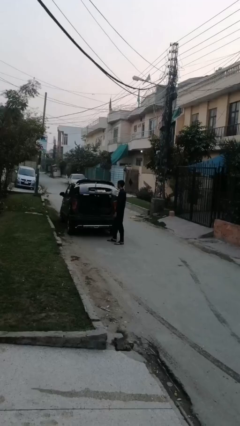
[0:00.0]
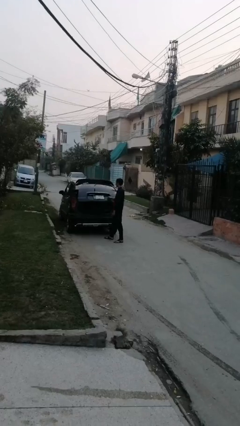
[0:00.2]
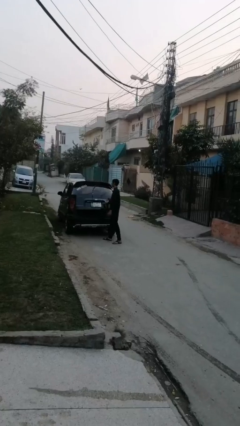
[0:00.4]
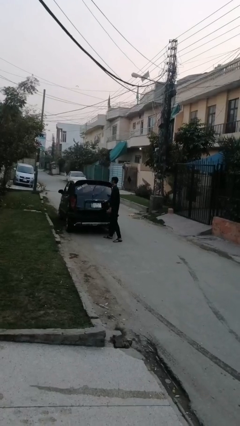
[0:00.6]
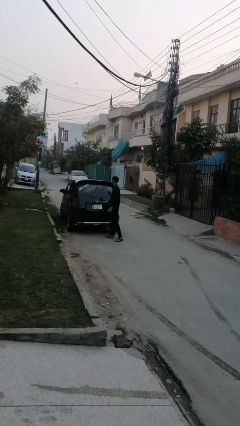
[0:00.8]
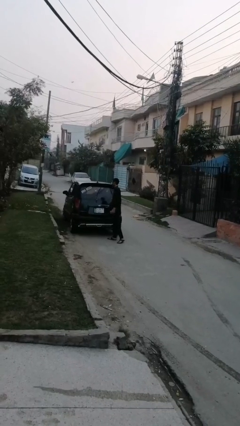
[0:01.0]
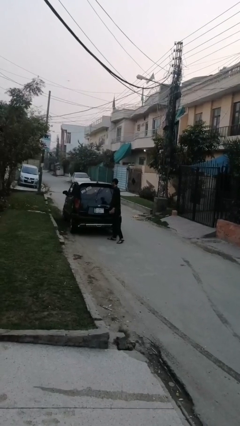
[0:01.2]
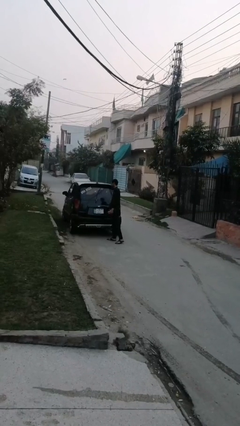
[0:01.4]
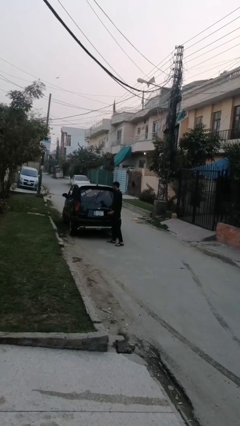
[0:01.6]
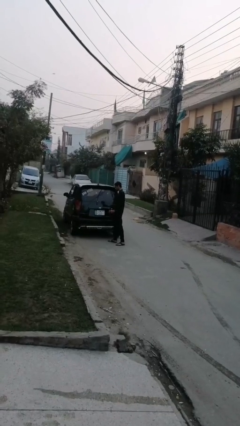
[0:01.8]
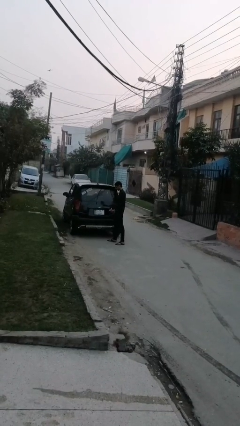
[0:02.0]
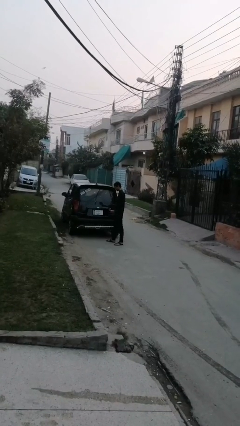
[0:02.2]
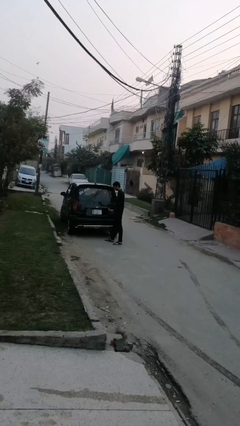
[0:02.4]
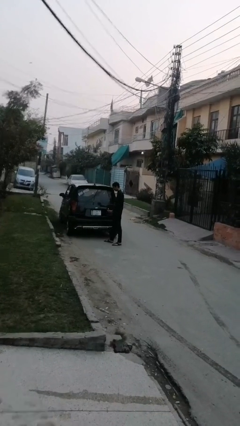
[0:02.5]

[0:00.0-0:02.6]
person closes car trunk

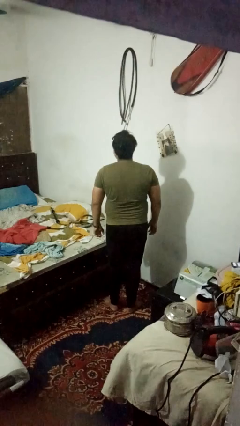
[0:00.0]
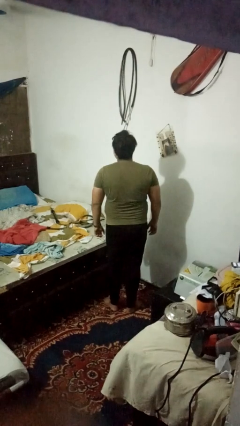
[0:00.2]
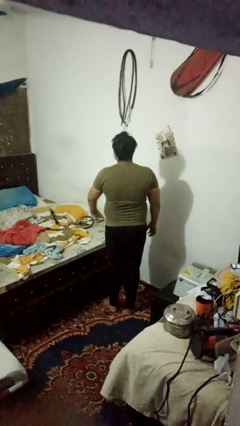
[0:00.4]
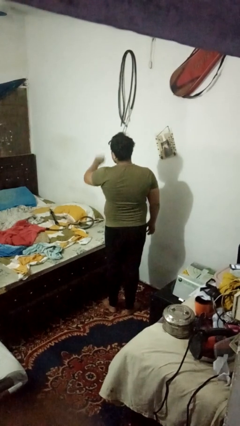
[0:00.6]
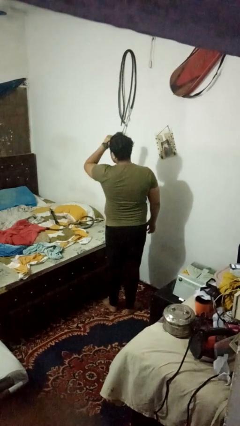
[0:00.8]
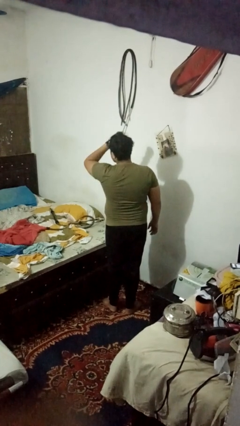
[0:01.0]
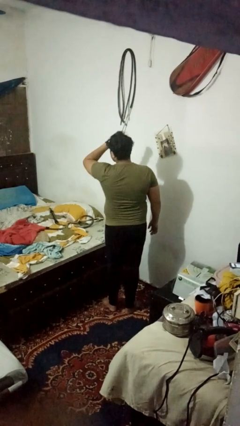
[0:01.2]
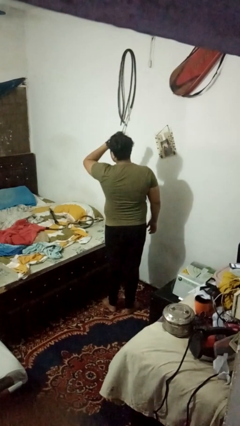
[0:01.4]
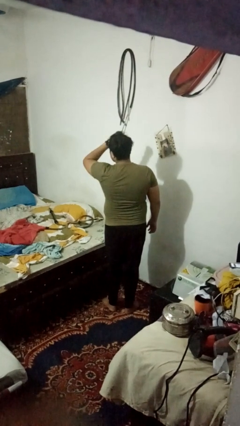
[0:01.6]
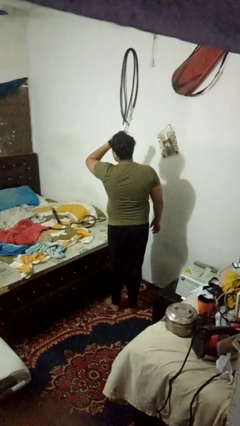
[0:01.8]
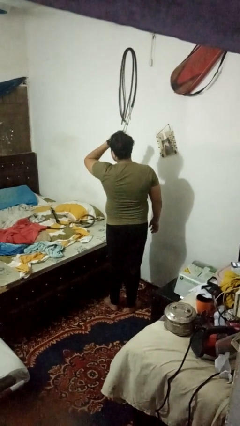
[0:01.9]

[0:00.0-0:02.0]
person gestures watch closely

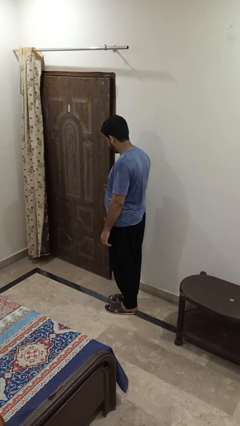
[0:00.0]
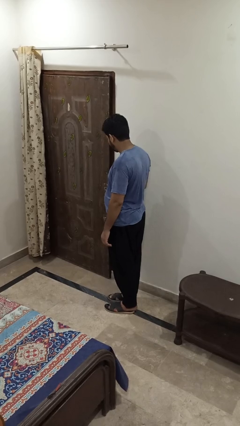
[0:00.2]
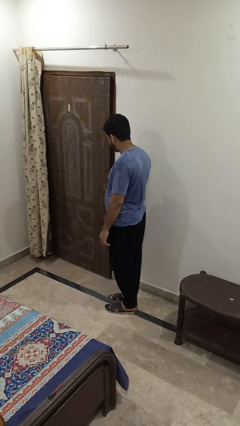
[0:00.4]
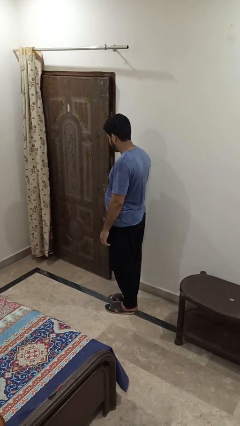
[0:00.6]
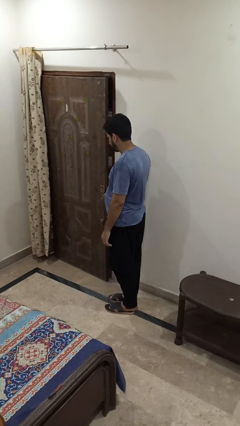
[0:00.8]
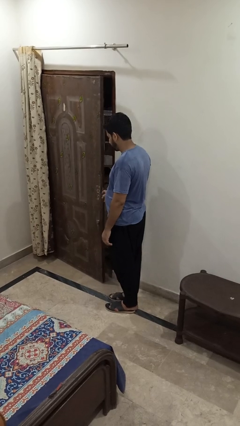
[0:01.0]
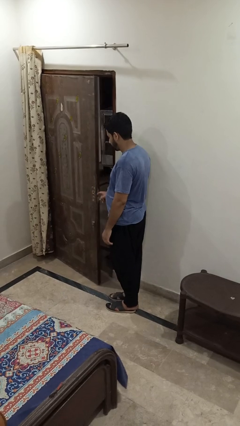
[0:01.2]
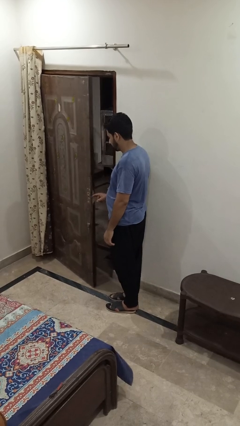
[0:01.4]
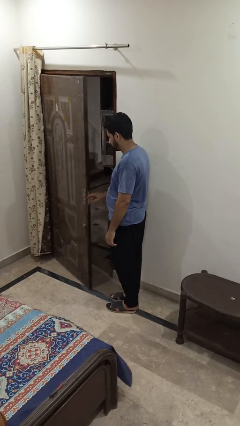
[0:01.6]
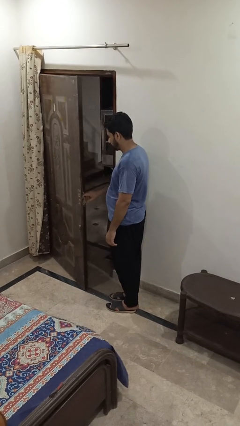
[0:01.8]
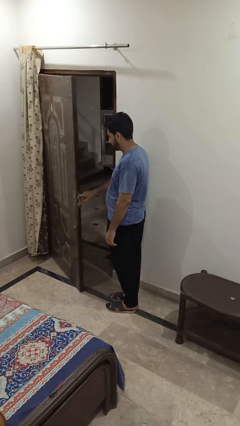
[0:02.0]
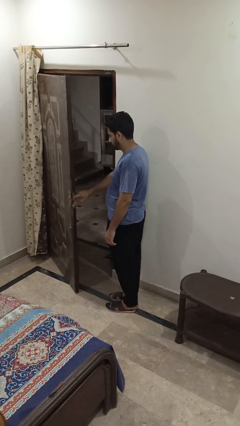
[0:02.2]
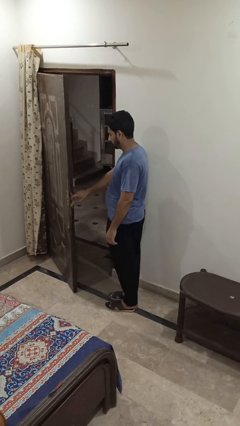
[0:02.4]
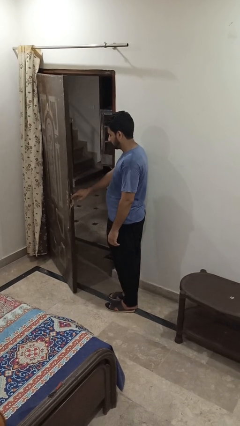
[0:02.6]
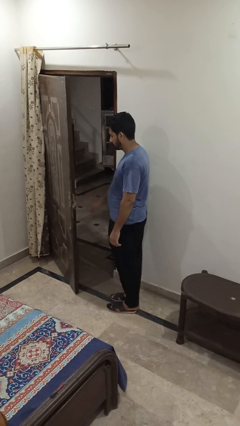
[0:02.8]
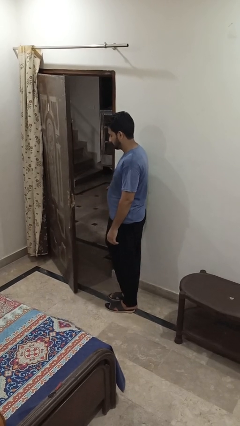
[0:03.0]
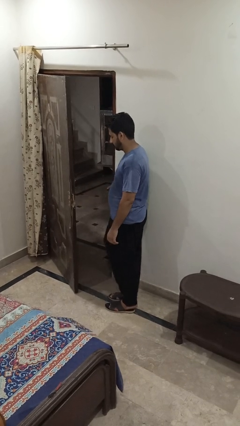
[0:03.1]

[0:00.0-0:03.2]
person opens facility door

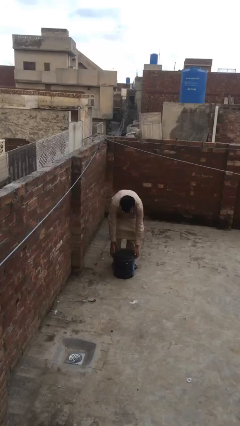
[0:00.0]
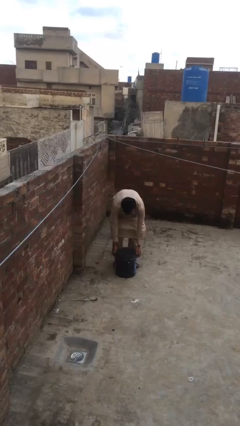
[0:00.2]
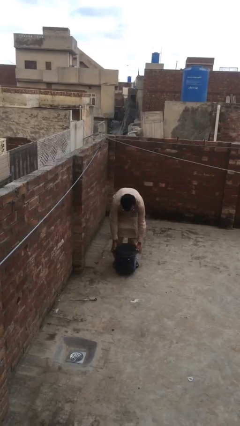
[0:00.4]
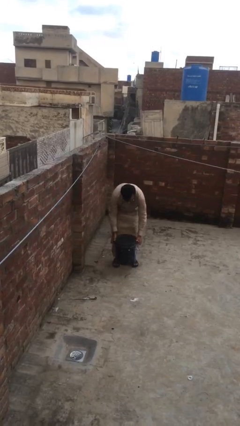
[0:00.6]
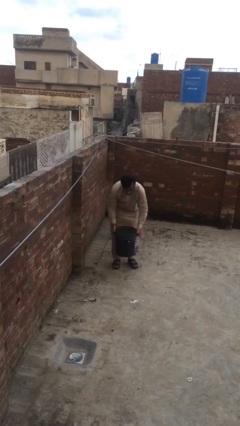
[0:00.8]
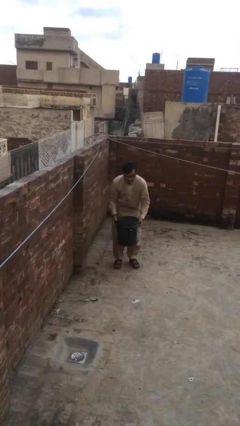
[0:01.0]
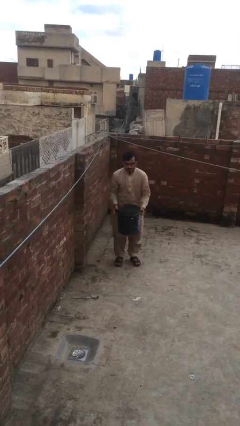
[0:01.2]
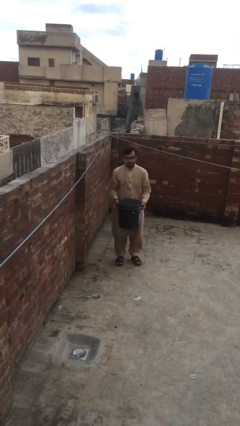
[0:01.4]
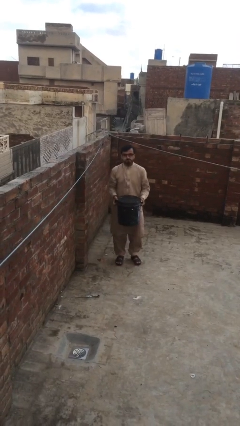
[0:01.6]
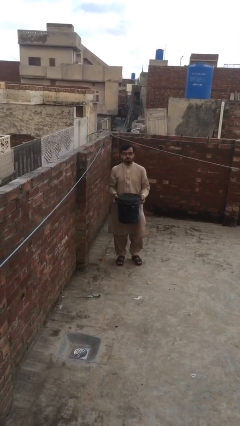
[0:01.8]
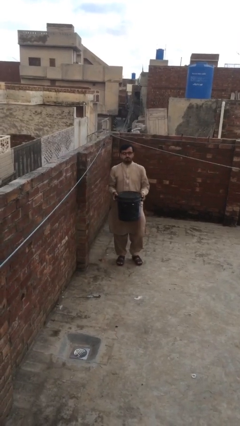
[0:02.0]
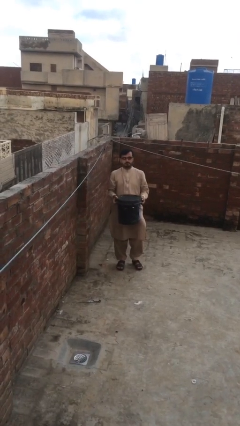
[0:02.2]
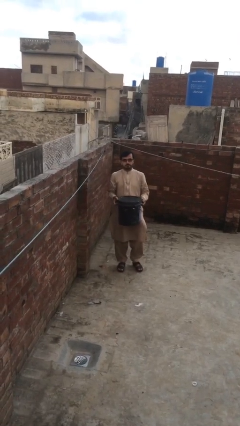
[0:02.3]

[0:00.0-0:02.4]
person picks up object from floor

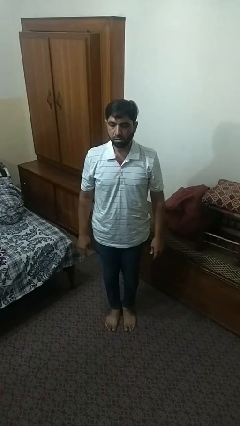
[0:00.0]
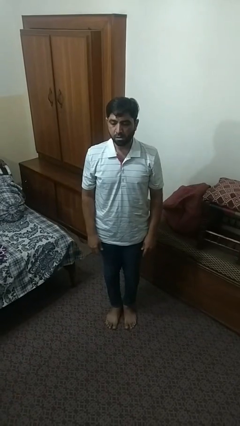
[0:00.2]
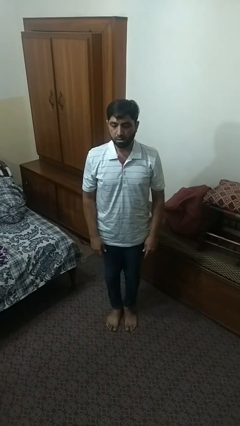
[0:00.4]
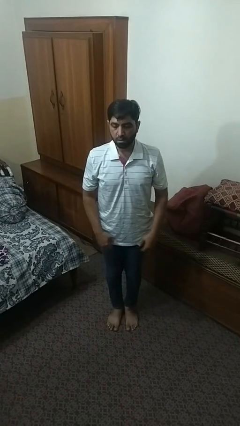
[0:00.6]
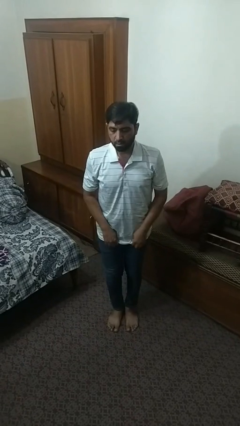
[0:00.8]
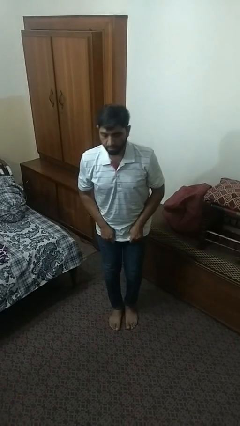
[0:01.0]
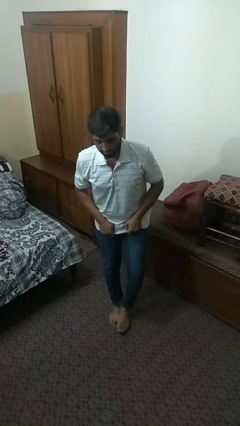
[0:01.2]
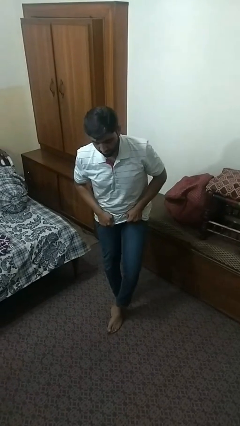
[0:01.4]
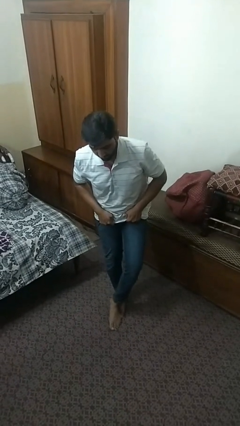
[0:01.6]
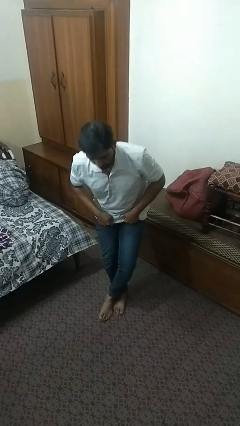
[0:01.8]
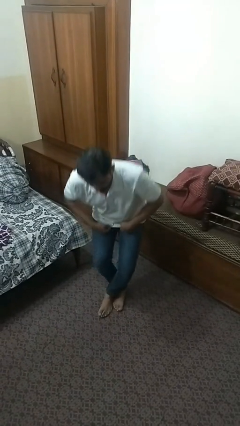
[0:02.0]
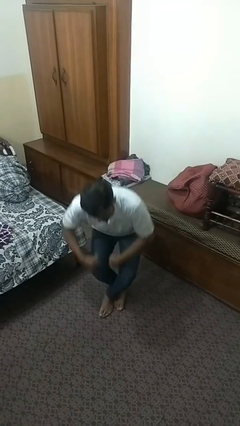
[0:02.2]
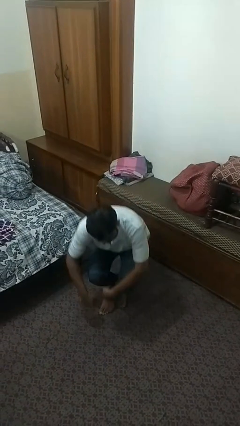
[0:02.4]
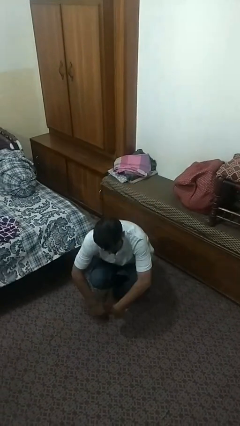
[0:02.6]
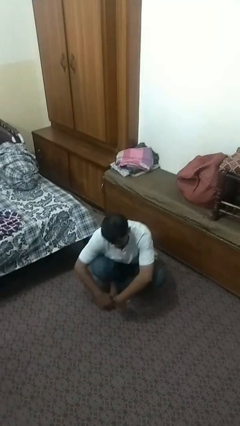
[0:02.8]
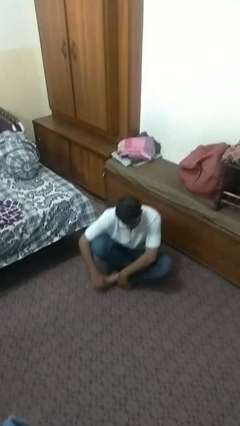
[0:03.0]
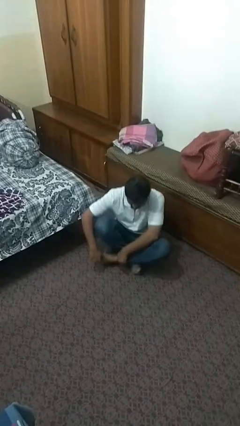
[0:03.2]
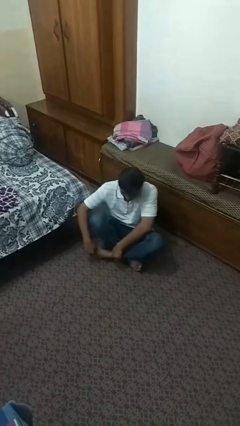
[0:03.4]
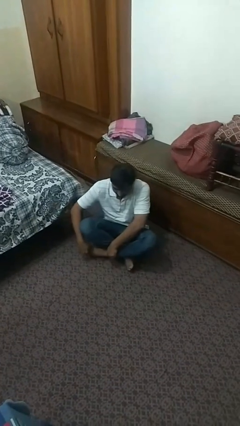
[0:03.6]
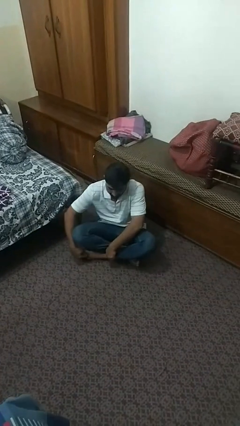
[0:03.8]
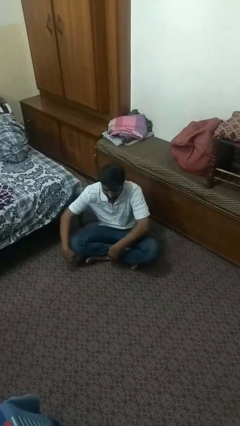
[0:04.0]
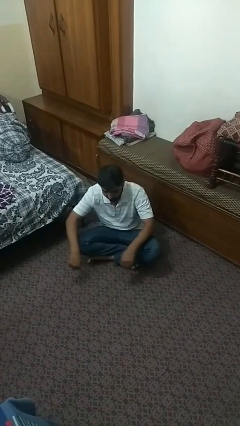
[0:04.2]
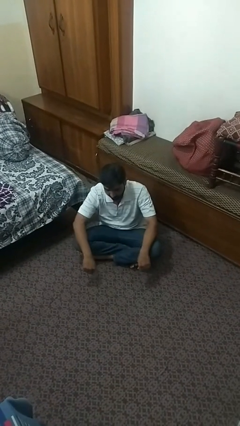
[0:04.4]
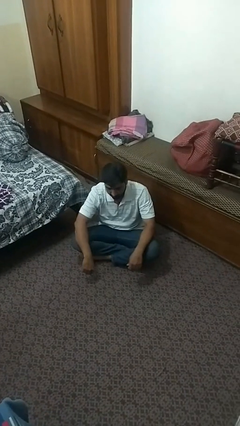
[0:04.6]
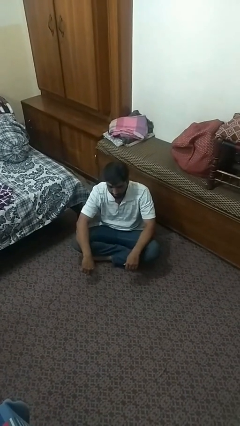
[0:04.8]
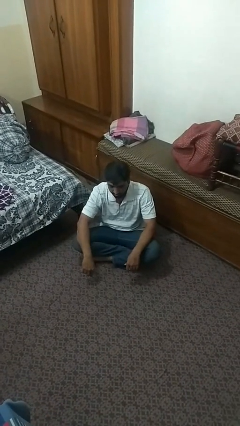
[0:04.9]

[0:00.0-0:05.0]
person sits crisscross

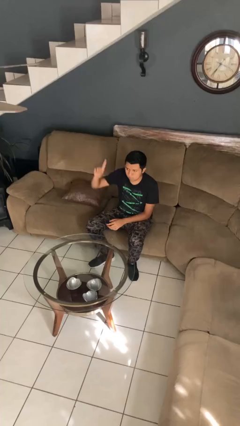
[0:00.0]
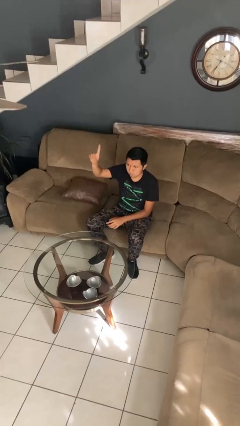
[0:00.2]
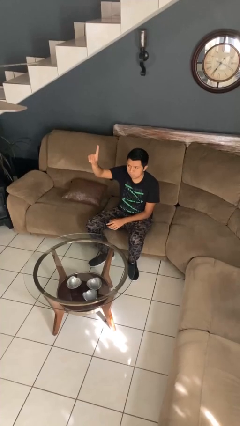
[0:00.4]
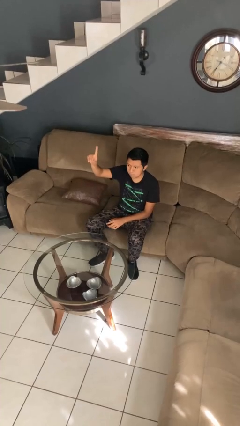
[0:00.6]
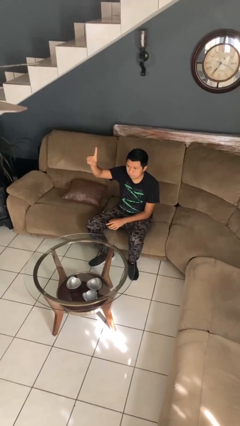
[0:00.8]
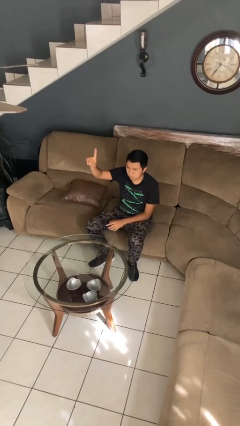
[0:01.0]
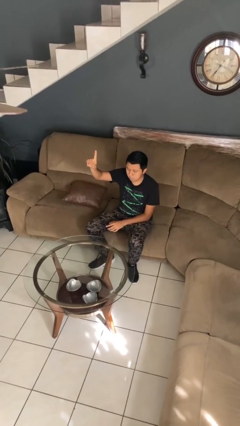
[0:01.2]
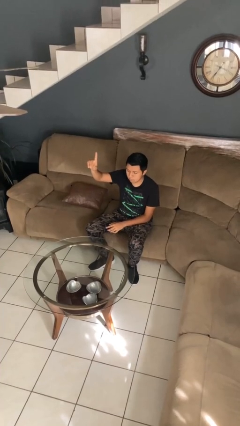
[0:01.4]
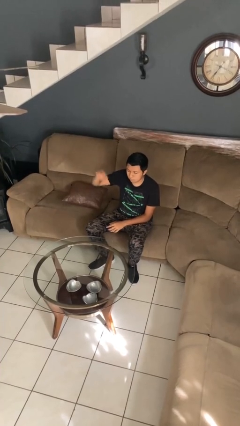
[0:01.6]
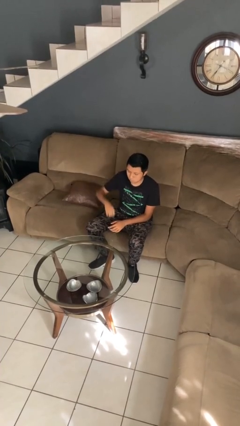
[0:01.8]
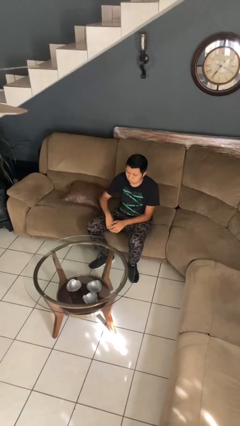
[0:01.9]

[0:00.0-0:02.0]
person gestures number one

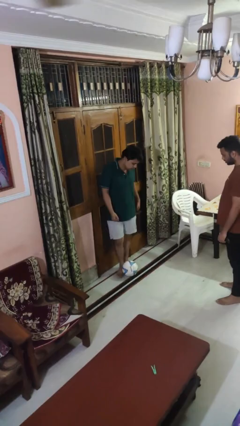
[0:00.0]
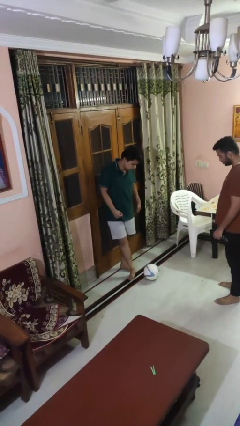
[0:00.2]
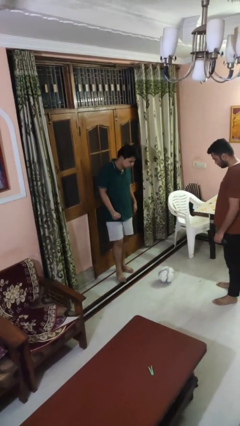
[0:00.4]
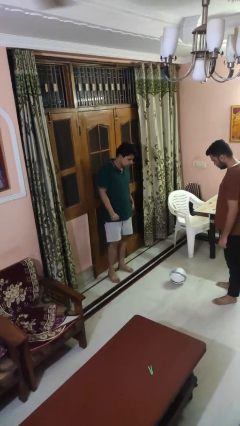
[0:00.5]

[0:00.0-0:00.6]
person kicks object to person
